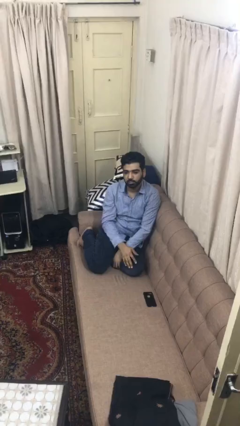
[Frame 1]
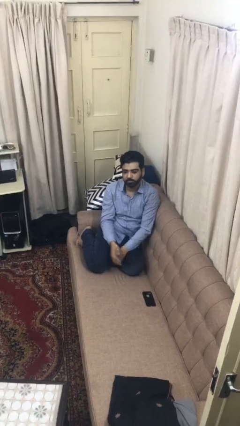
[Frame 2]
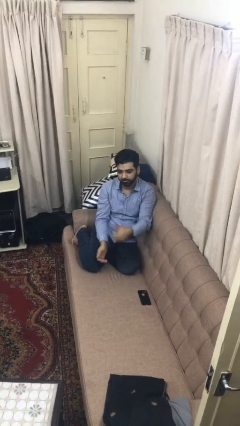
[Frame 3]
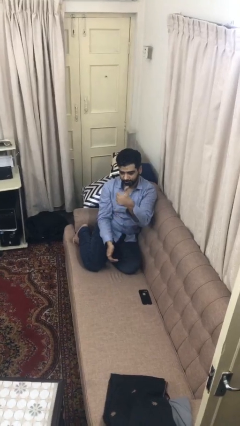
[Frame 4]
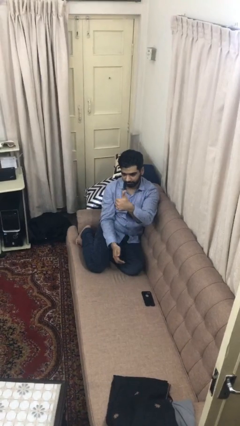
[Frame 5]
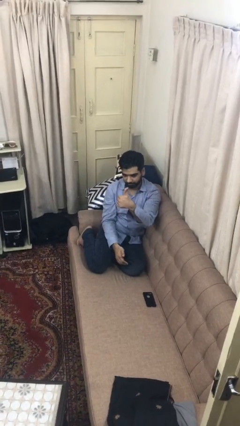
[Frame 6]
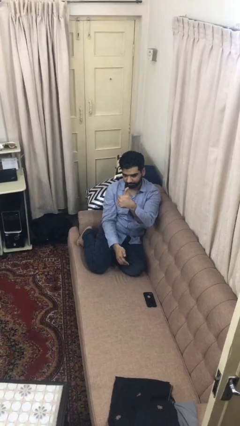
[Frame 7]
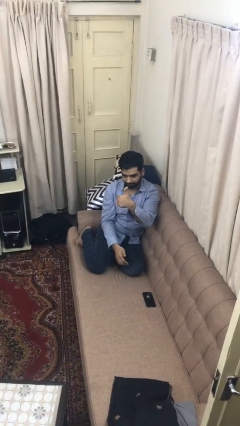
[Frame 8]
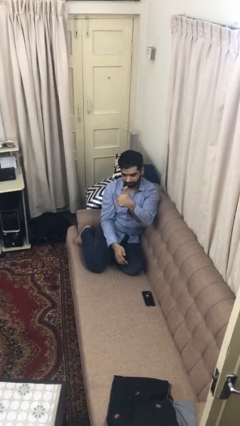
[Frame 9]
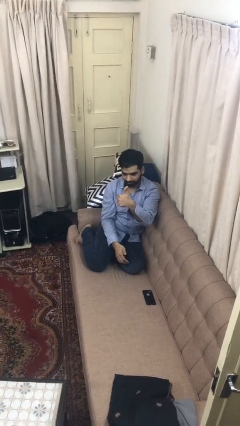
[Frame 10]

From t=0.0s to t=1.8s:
person gestures thumbs up

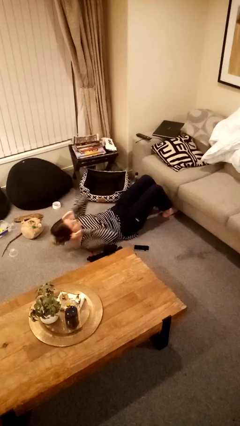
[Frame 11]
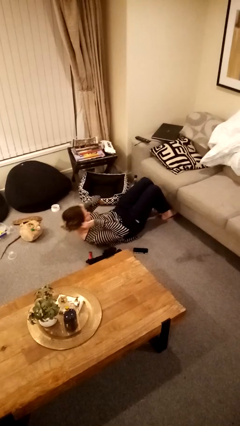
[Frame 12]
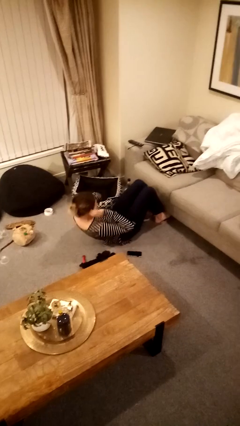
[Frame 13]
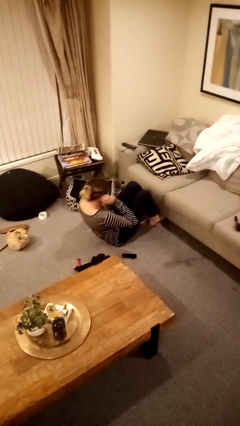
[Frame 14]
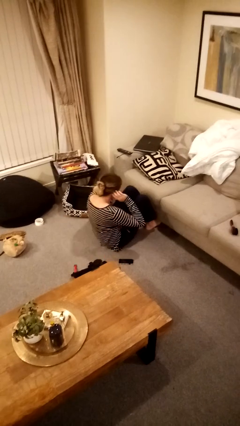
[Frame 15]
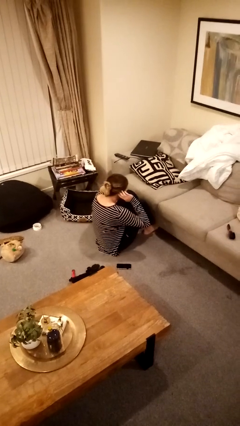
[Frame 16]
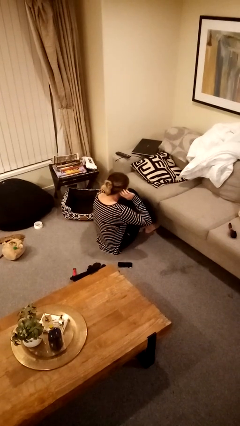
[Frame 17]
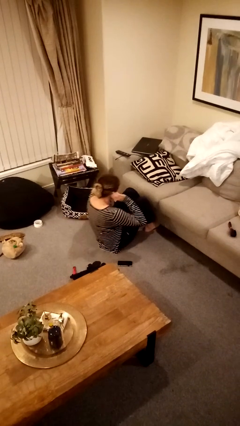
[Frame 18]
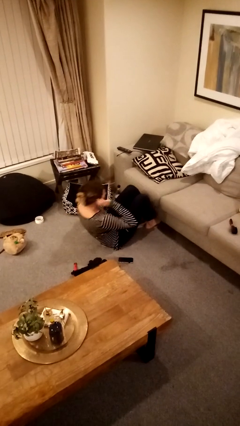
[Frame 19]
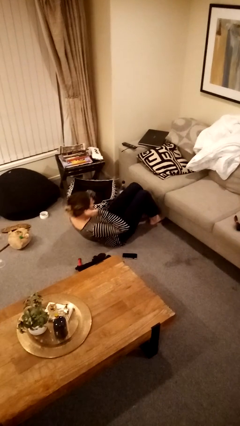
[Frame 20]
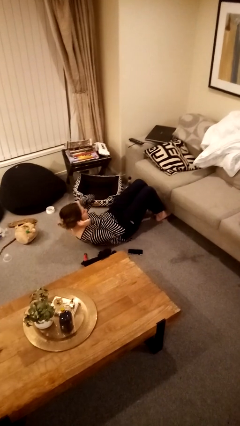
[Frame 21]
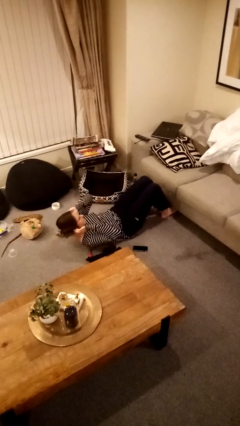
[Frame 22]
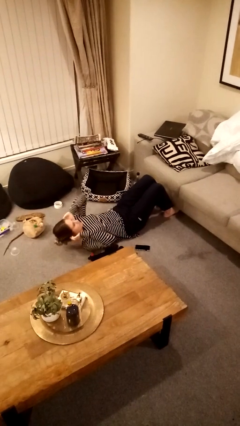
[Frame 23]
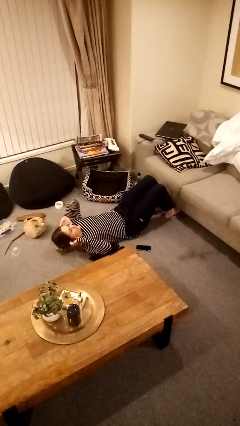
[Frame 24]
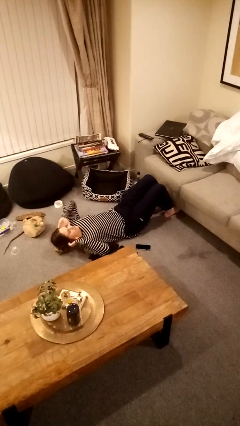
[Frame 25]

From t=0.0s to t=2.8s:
person exercises with situp

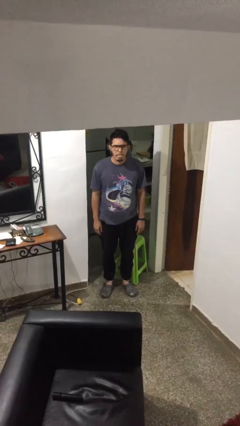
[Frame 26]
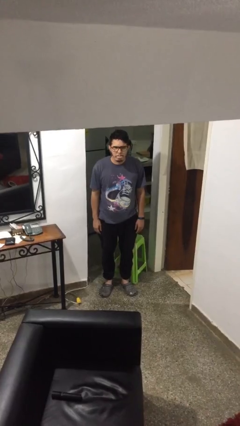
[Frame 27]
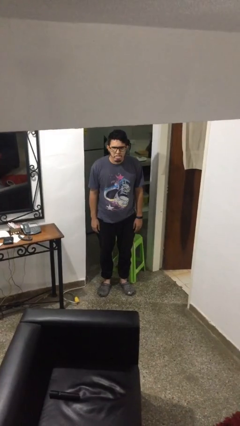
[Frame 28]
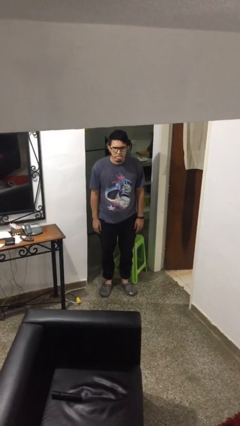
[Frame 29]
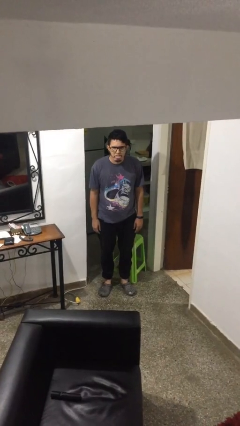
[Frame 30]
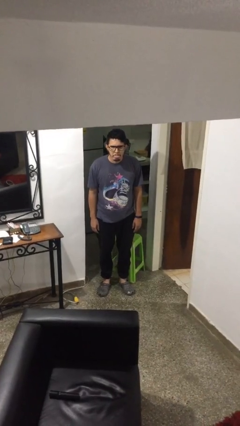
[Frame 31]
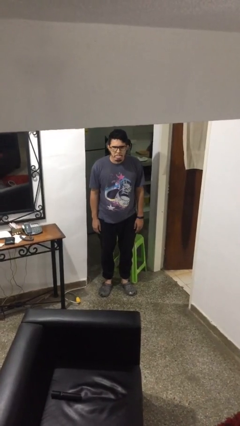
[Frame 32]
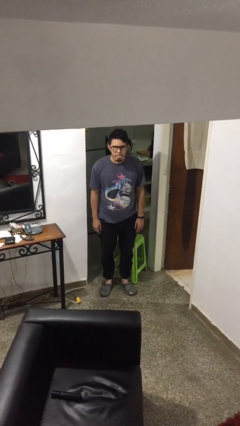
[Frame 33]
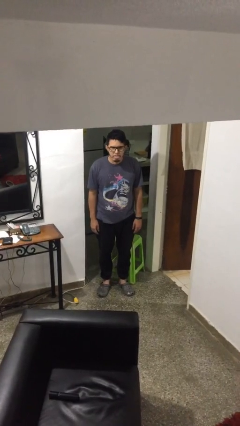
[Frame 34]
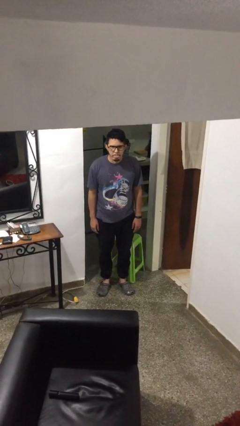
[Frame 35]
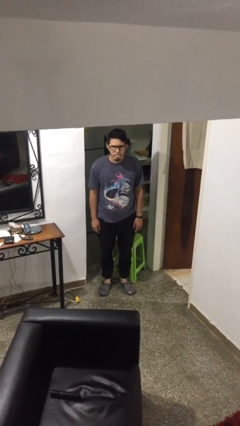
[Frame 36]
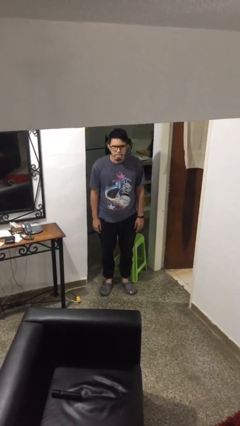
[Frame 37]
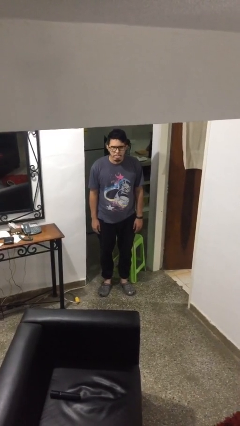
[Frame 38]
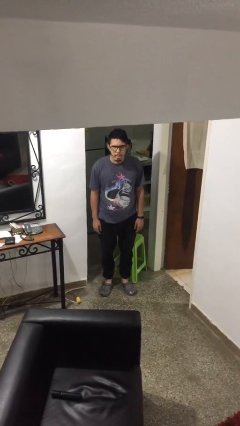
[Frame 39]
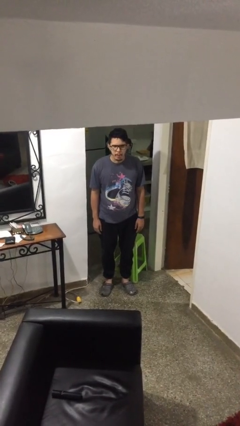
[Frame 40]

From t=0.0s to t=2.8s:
person sticks out tongue

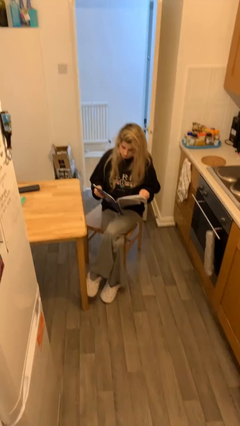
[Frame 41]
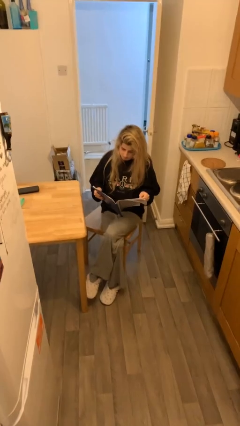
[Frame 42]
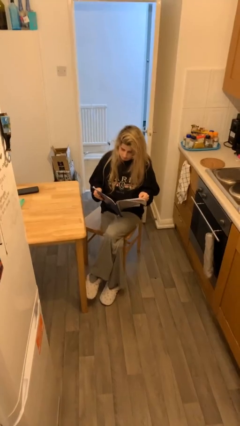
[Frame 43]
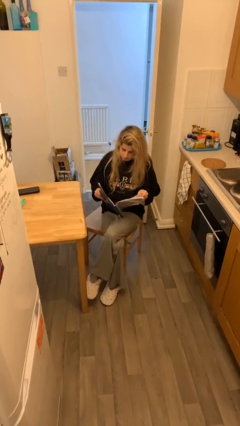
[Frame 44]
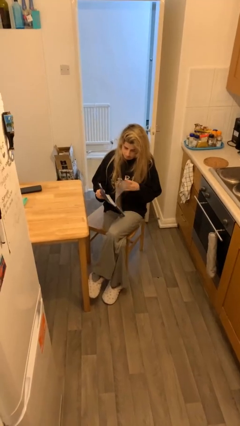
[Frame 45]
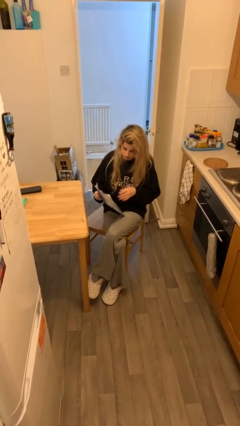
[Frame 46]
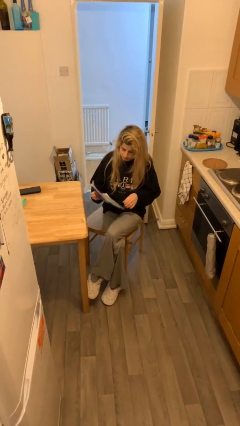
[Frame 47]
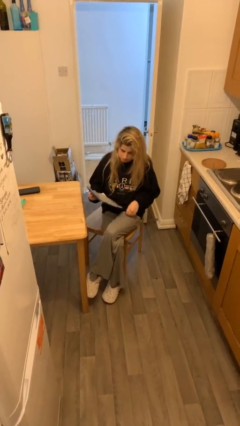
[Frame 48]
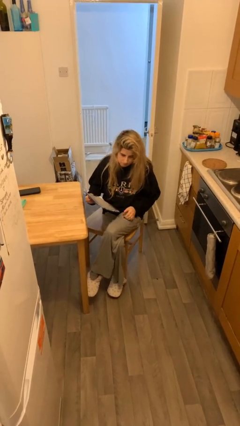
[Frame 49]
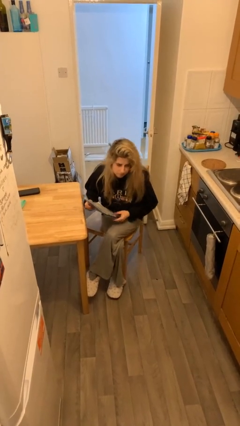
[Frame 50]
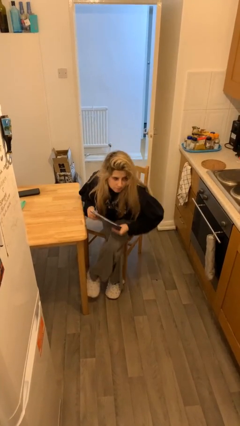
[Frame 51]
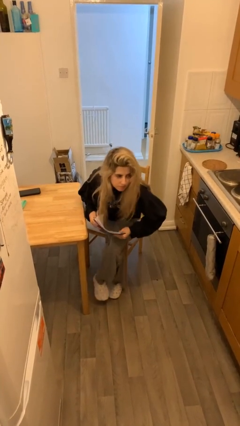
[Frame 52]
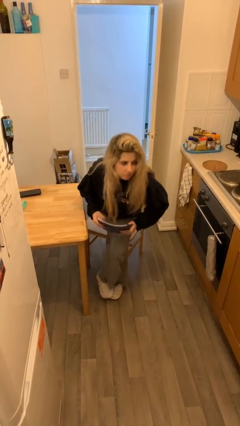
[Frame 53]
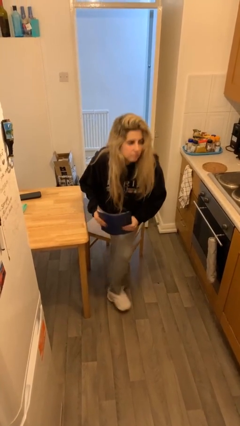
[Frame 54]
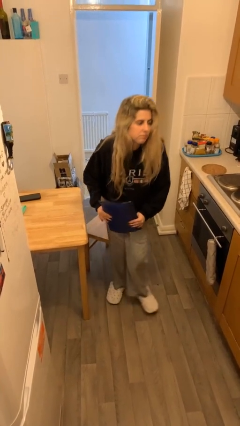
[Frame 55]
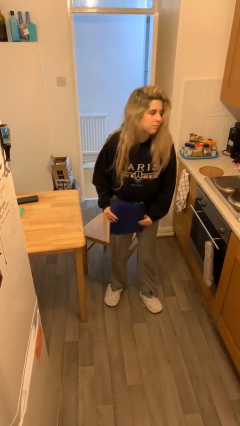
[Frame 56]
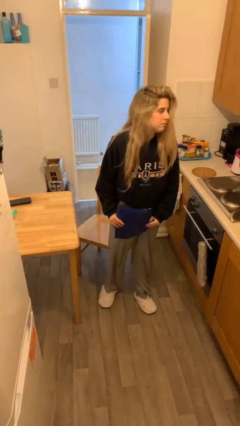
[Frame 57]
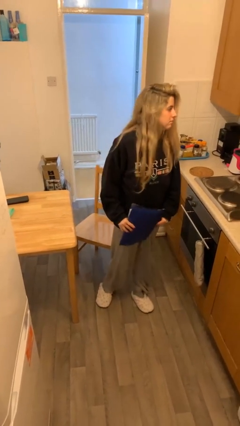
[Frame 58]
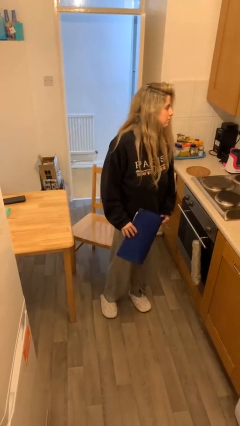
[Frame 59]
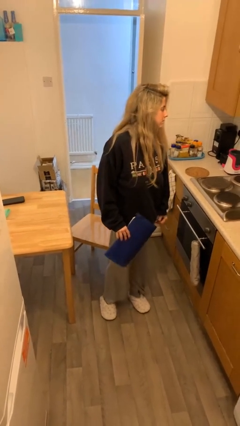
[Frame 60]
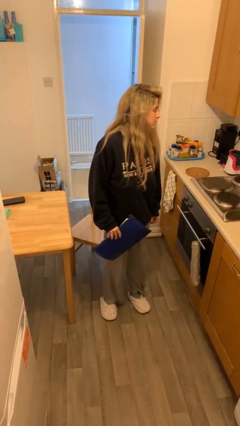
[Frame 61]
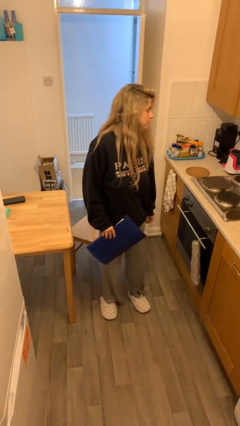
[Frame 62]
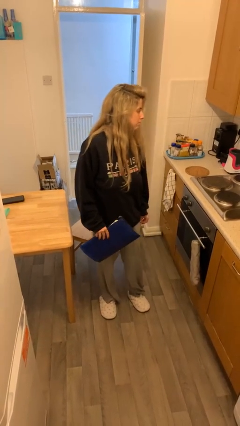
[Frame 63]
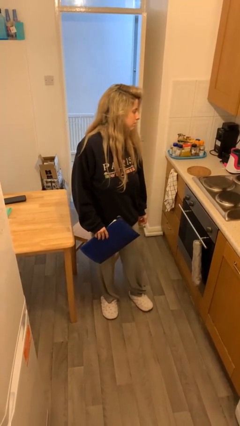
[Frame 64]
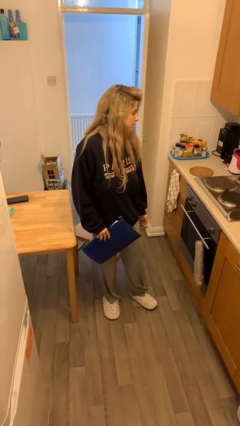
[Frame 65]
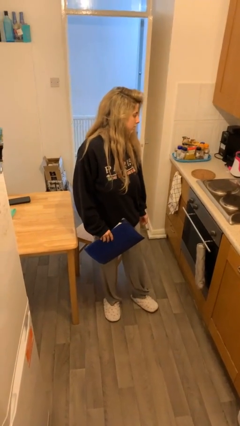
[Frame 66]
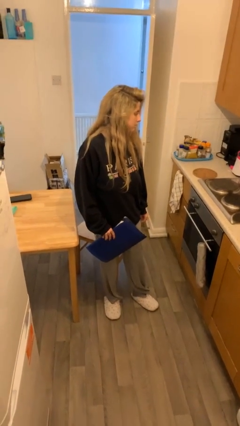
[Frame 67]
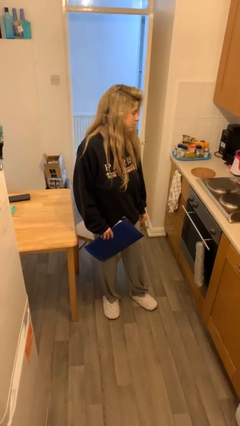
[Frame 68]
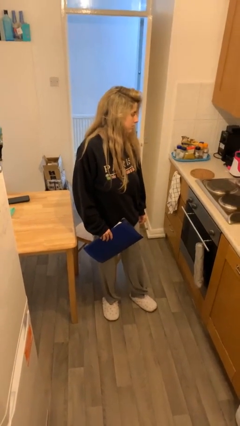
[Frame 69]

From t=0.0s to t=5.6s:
person stands up

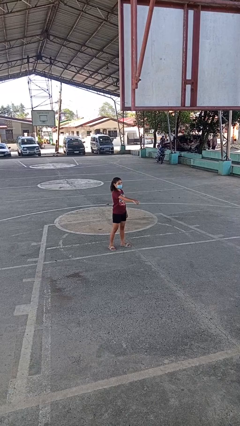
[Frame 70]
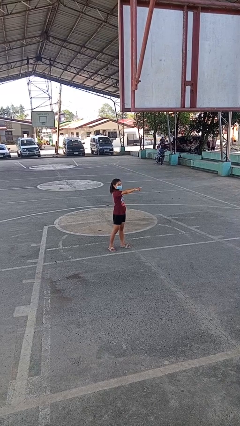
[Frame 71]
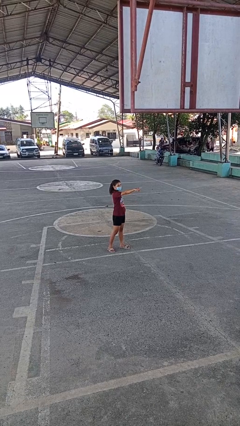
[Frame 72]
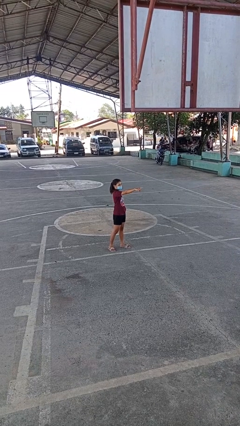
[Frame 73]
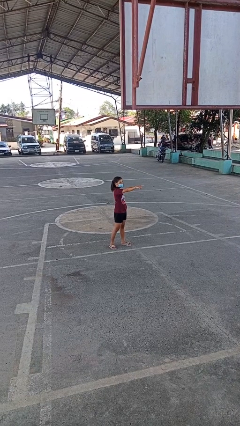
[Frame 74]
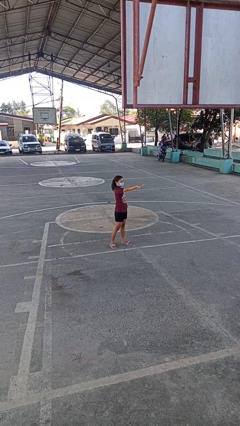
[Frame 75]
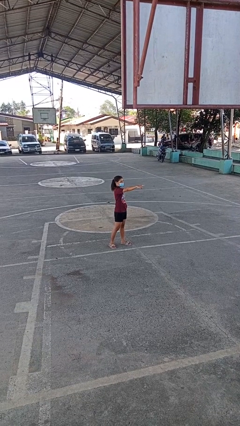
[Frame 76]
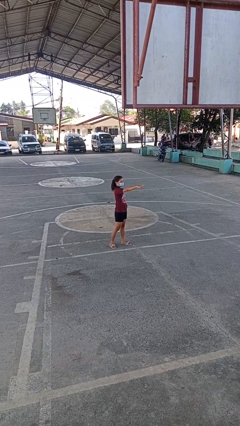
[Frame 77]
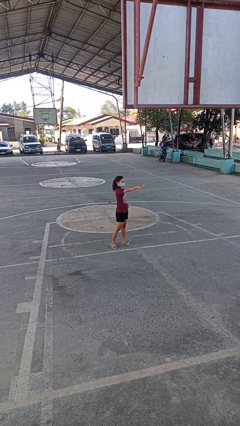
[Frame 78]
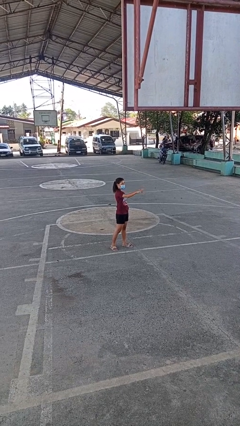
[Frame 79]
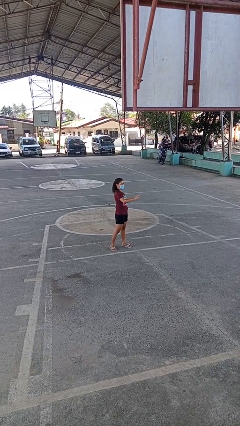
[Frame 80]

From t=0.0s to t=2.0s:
person points at person

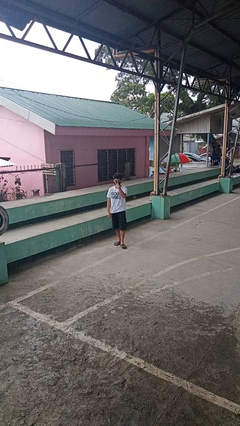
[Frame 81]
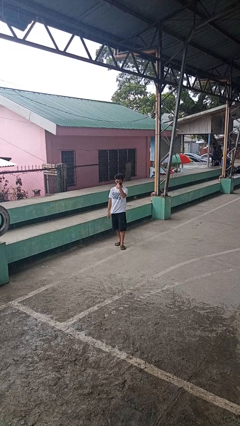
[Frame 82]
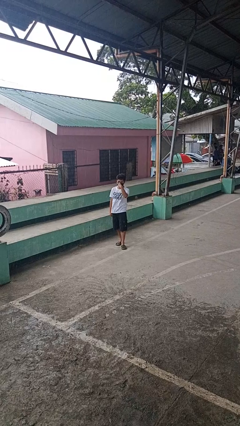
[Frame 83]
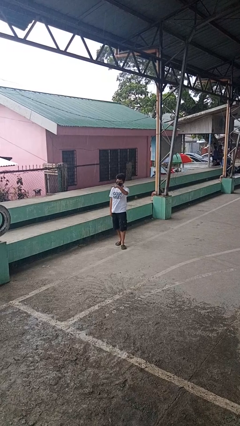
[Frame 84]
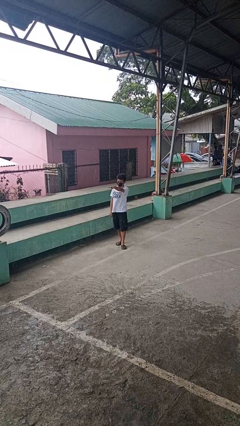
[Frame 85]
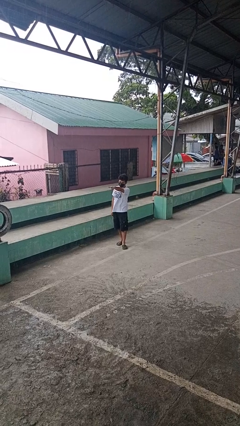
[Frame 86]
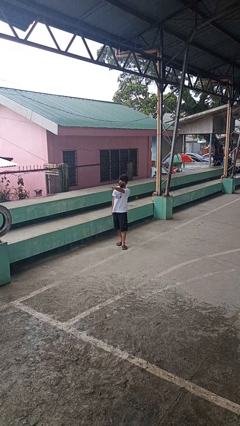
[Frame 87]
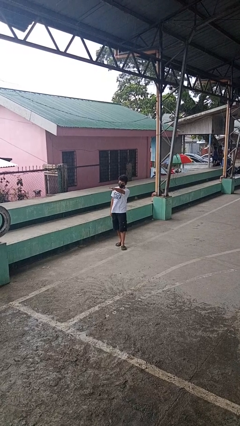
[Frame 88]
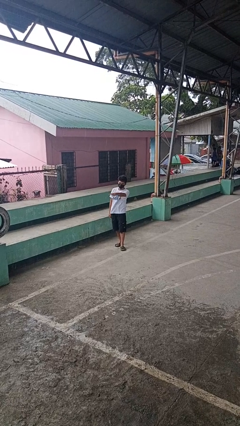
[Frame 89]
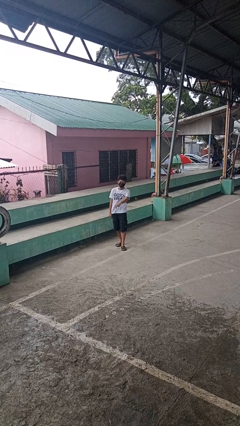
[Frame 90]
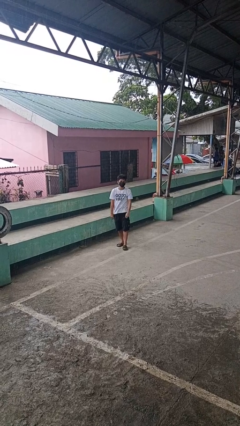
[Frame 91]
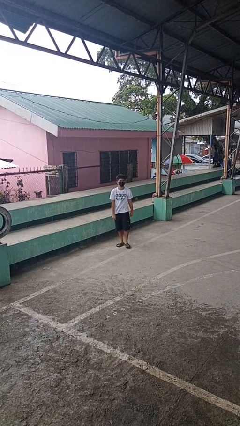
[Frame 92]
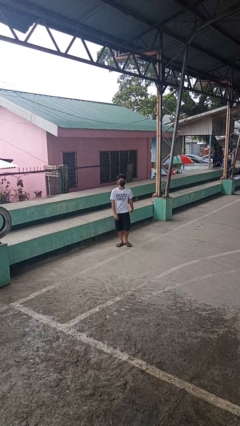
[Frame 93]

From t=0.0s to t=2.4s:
person gestures watch closely
